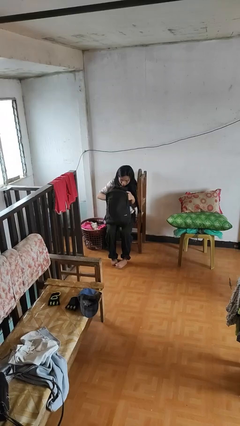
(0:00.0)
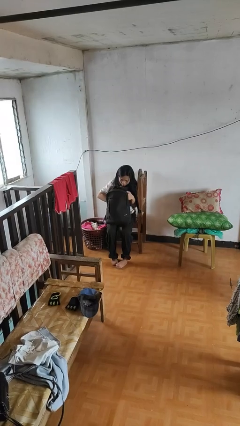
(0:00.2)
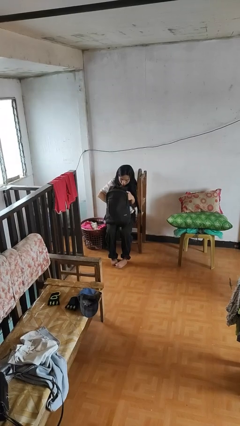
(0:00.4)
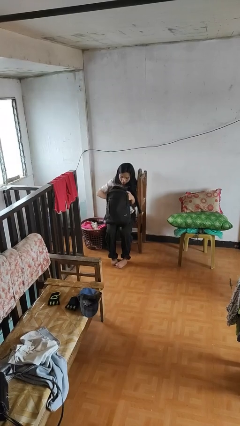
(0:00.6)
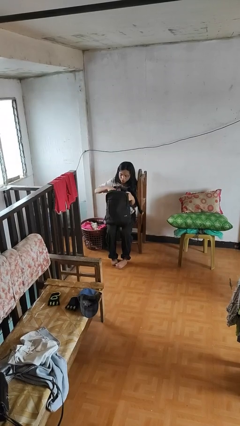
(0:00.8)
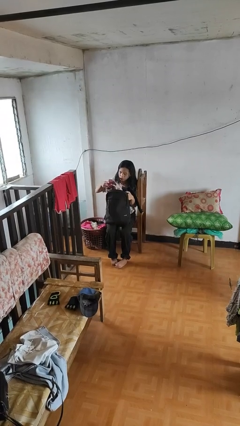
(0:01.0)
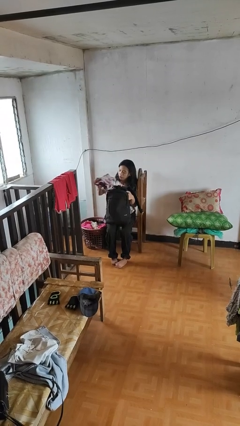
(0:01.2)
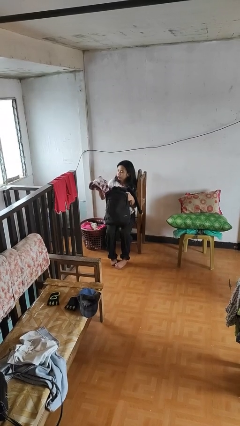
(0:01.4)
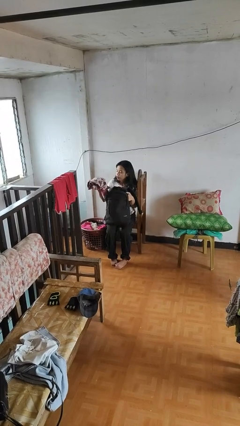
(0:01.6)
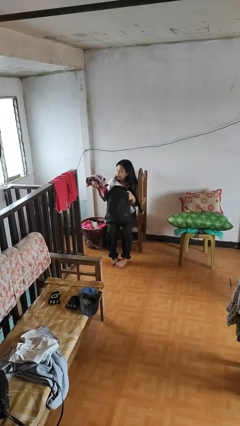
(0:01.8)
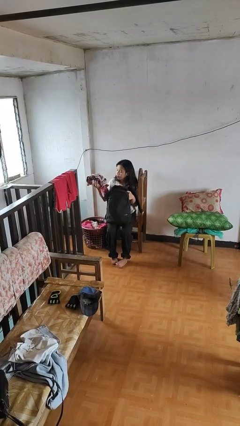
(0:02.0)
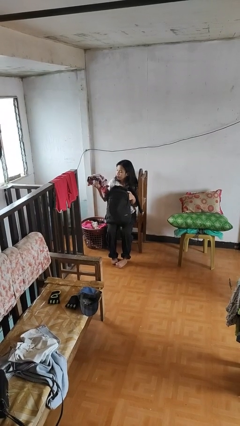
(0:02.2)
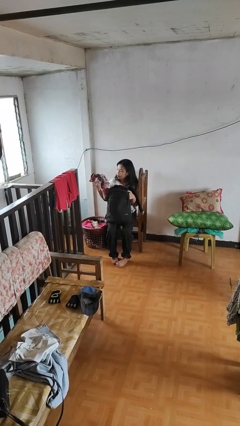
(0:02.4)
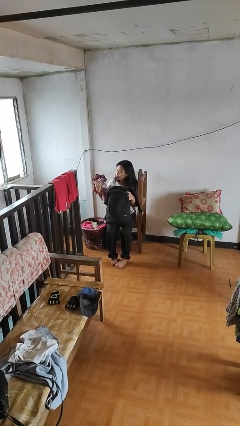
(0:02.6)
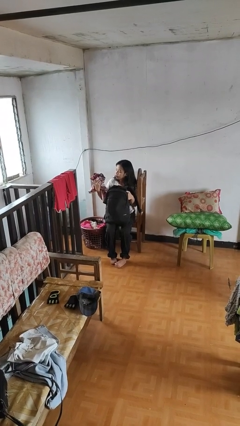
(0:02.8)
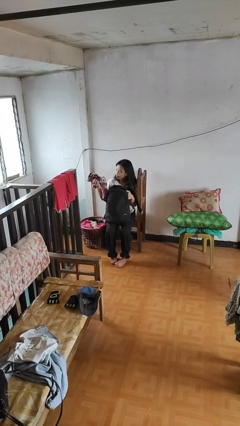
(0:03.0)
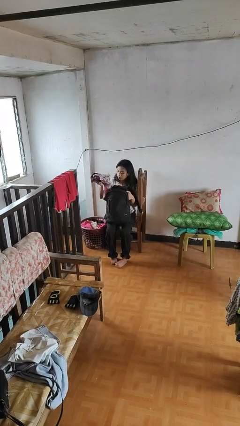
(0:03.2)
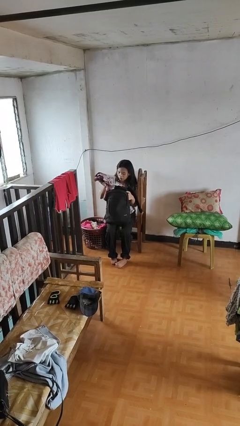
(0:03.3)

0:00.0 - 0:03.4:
person takes object from backpack

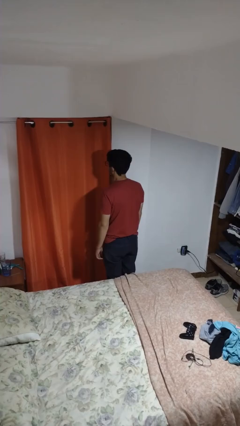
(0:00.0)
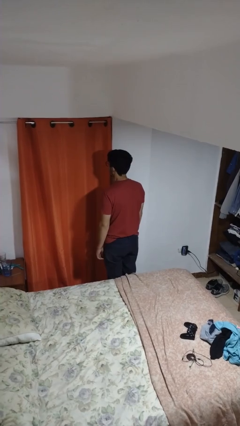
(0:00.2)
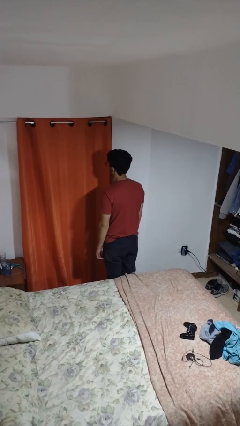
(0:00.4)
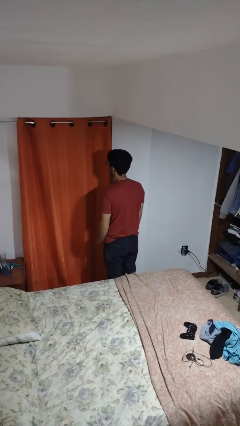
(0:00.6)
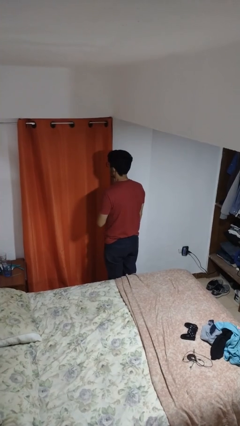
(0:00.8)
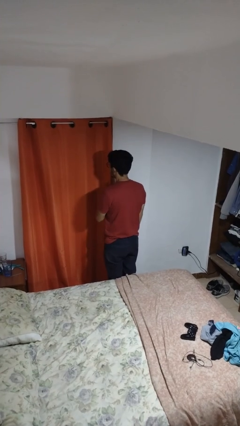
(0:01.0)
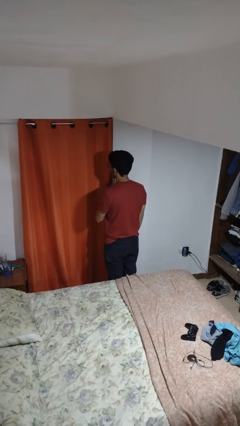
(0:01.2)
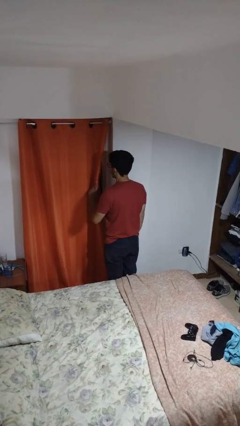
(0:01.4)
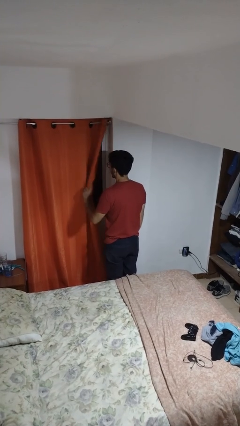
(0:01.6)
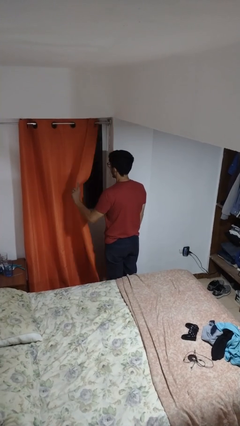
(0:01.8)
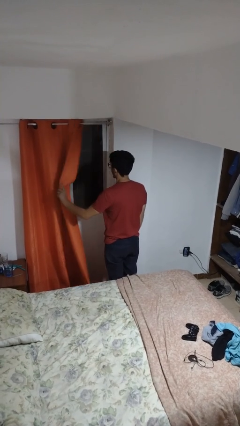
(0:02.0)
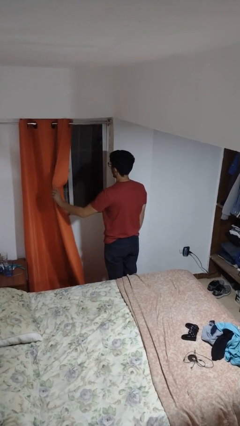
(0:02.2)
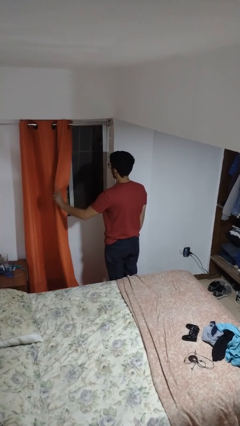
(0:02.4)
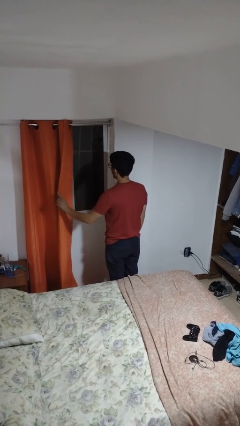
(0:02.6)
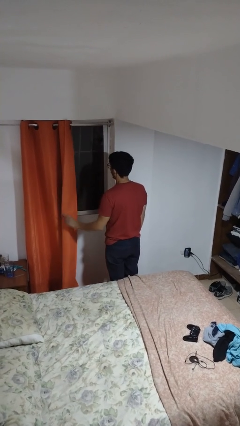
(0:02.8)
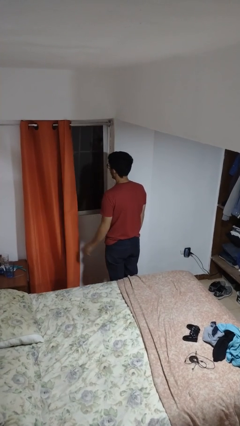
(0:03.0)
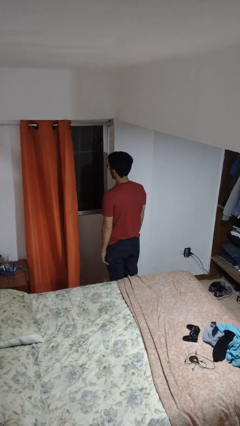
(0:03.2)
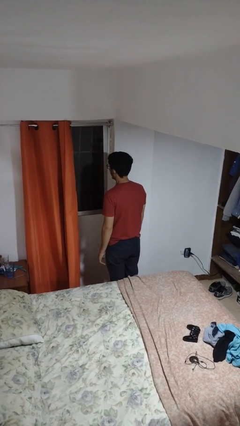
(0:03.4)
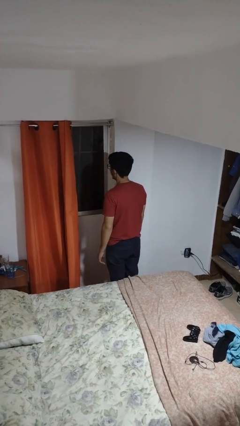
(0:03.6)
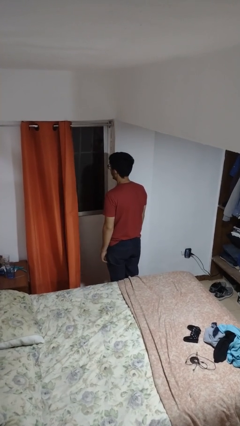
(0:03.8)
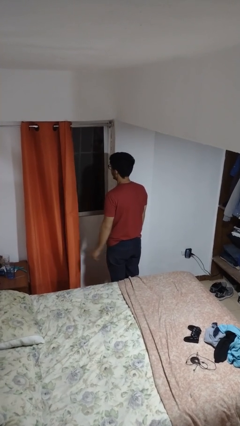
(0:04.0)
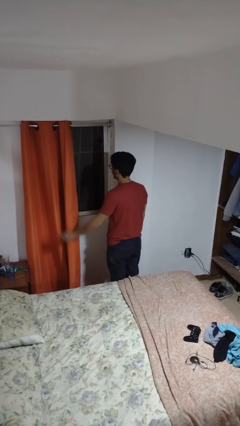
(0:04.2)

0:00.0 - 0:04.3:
person opens curtains

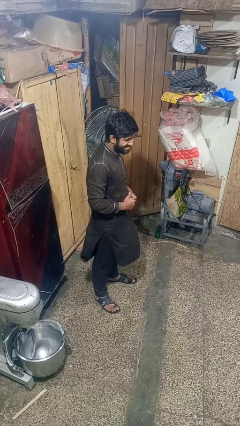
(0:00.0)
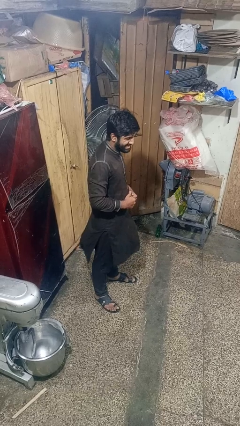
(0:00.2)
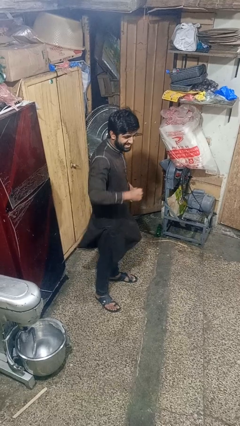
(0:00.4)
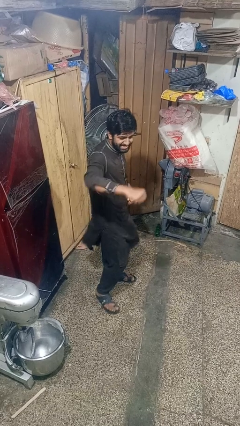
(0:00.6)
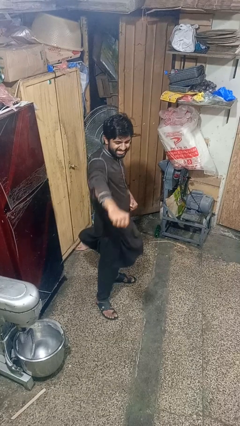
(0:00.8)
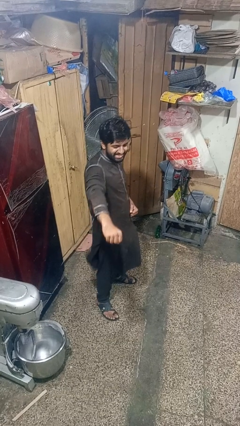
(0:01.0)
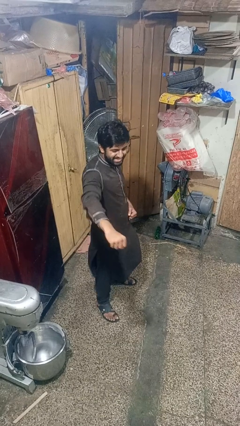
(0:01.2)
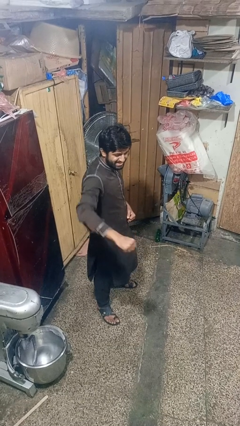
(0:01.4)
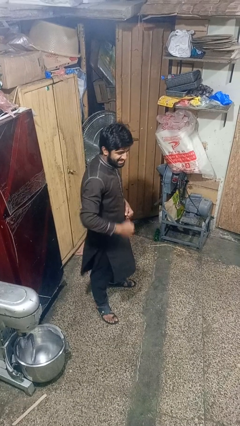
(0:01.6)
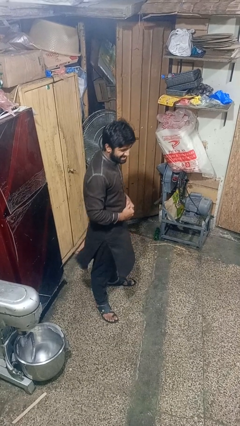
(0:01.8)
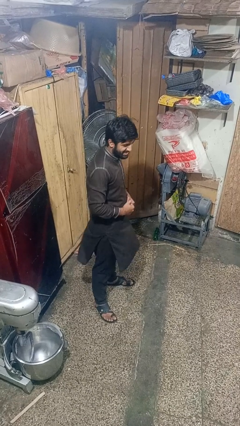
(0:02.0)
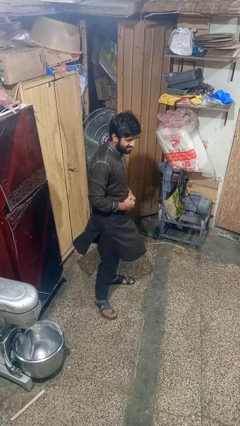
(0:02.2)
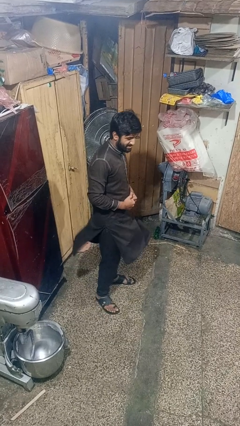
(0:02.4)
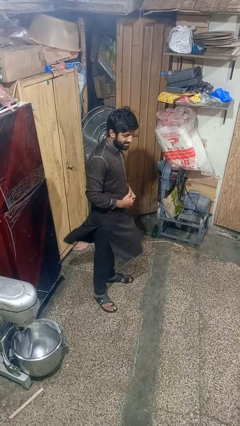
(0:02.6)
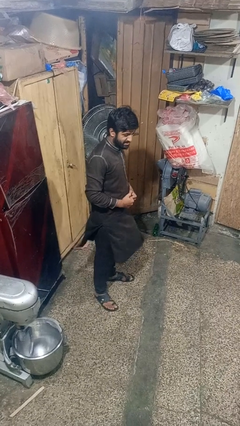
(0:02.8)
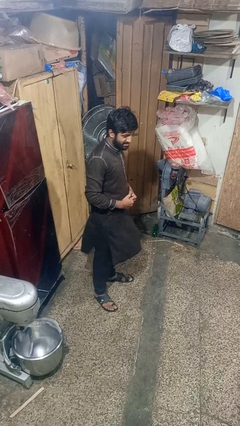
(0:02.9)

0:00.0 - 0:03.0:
person karate chop

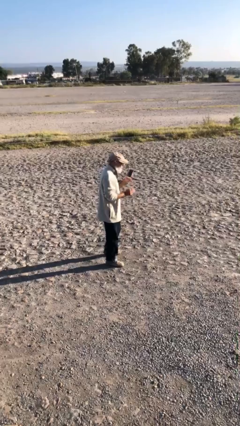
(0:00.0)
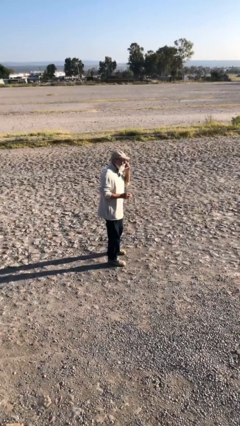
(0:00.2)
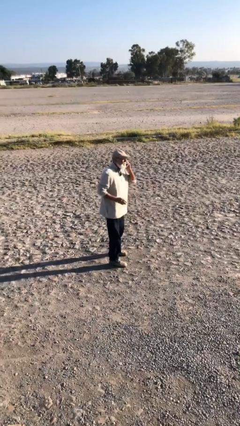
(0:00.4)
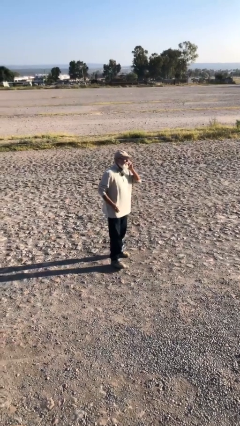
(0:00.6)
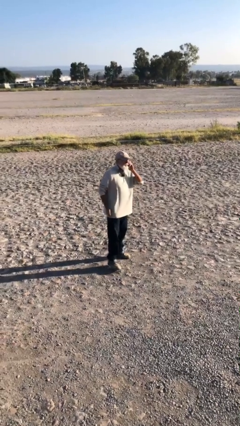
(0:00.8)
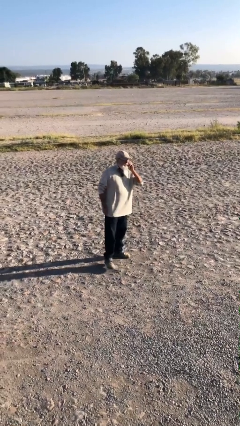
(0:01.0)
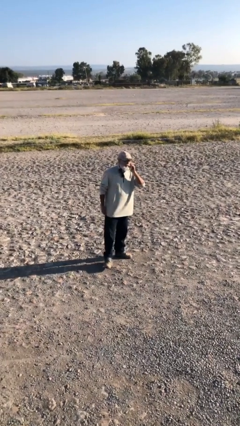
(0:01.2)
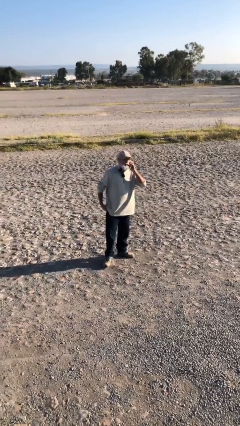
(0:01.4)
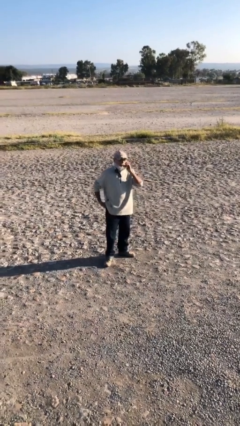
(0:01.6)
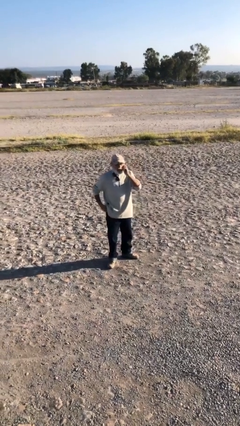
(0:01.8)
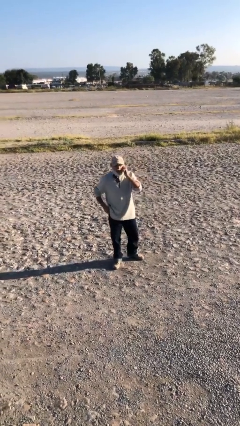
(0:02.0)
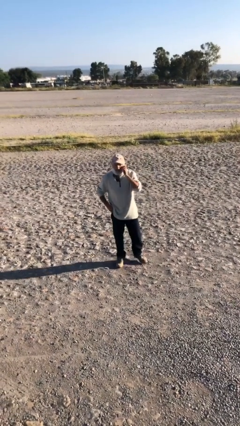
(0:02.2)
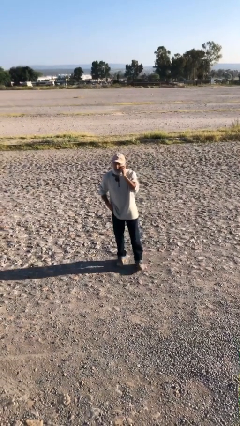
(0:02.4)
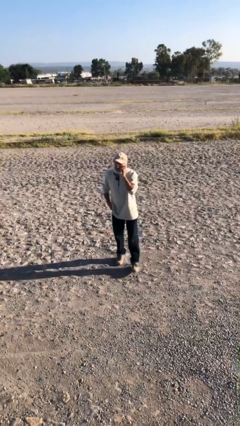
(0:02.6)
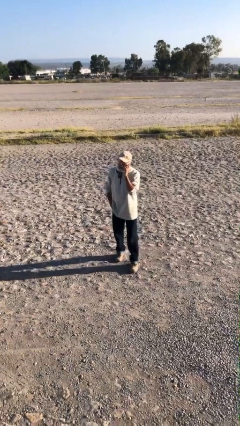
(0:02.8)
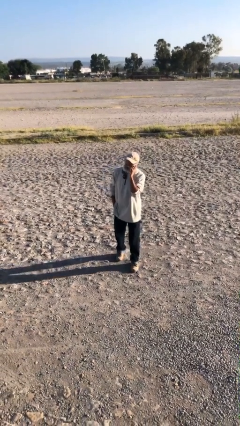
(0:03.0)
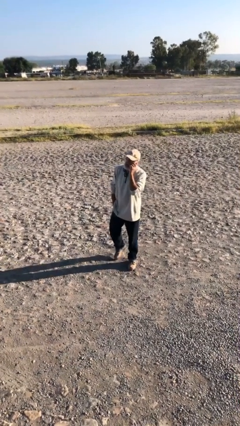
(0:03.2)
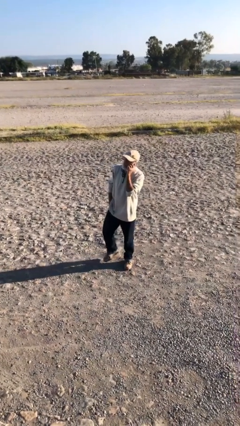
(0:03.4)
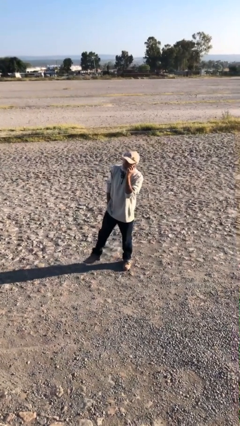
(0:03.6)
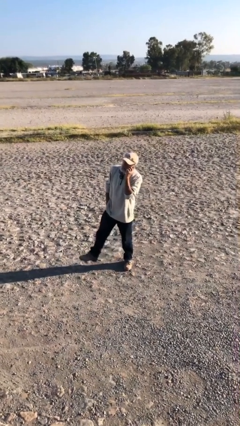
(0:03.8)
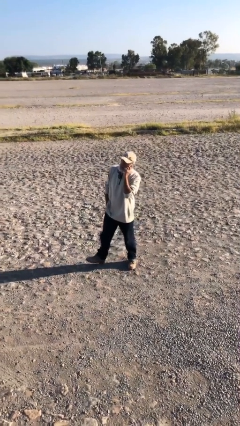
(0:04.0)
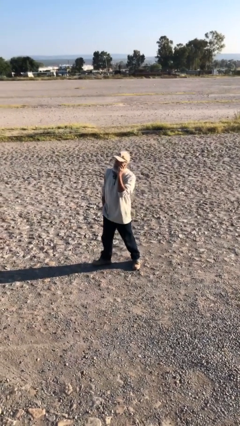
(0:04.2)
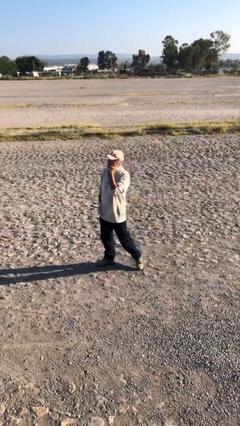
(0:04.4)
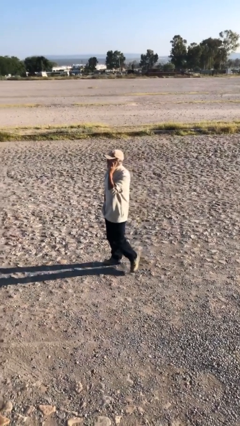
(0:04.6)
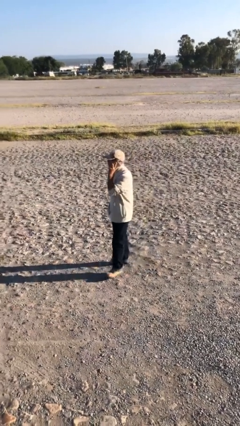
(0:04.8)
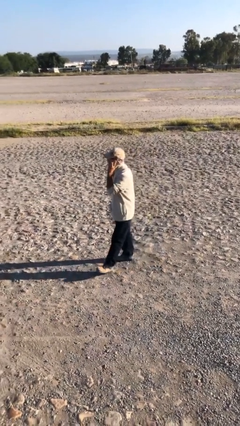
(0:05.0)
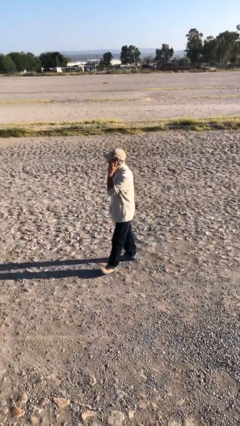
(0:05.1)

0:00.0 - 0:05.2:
person talks on phone

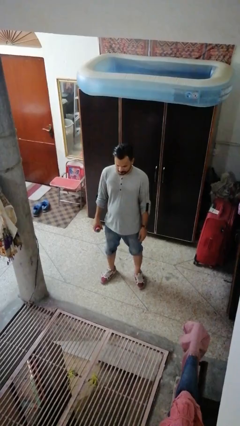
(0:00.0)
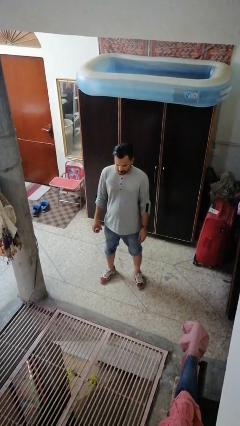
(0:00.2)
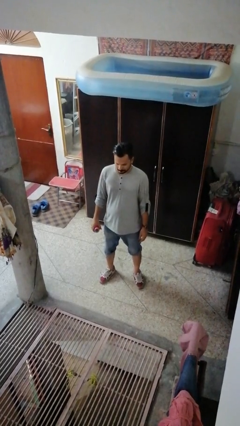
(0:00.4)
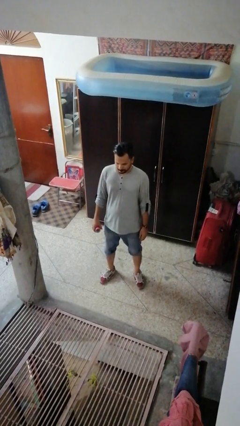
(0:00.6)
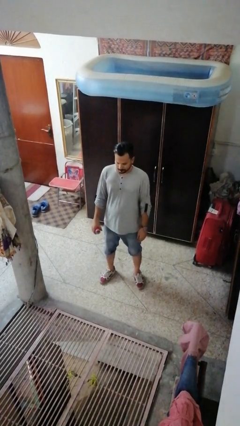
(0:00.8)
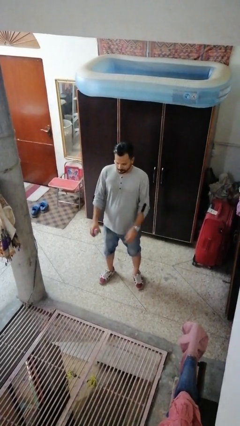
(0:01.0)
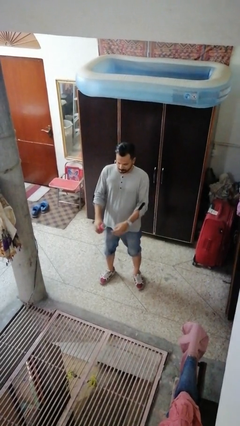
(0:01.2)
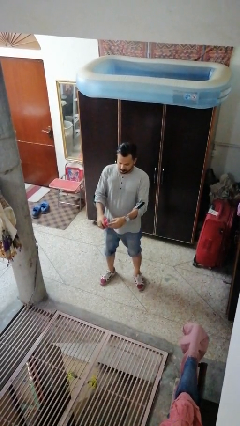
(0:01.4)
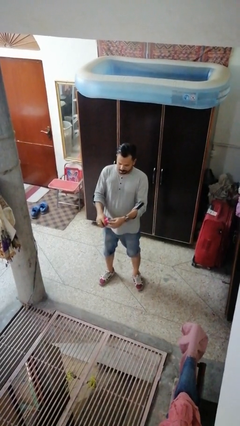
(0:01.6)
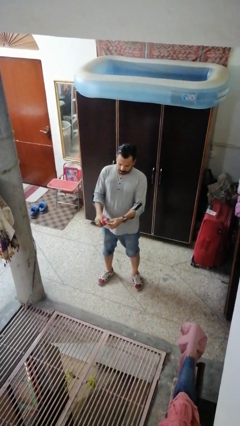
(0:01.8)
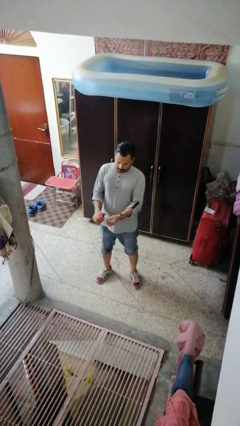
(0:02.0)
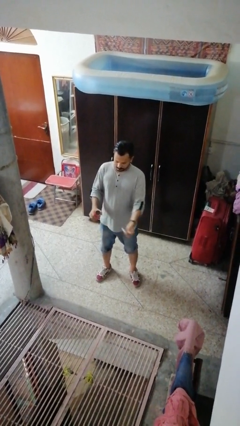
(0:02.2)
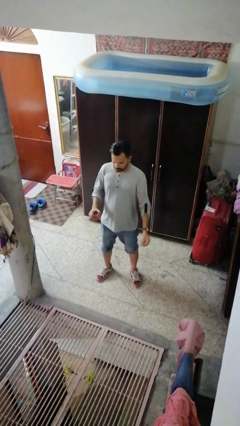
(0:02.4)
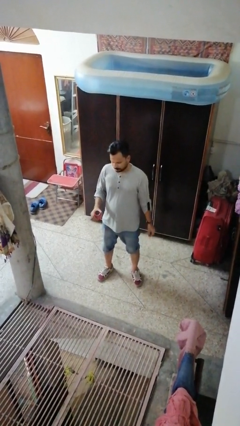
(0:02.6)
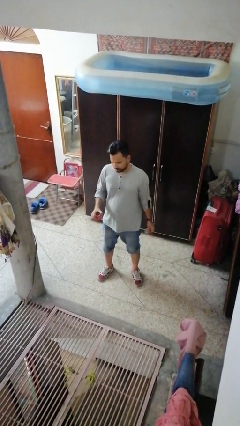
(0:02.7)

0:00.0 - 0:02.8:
person opens beverage can
